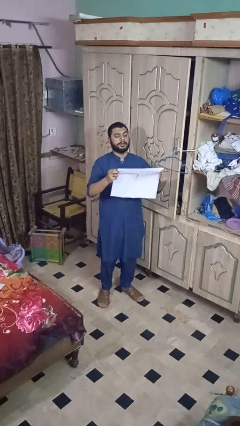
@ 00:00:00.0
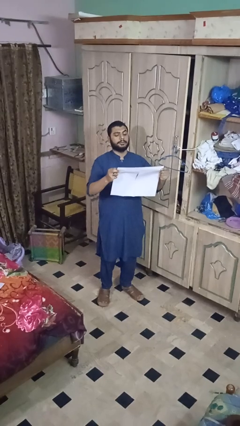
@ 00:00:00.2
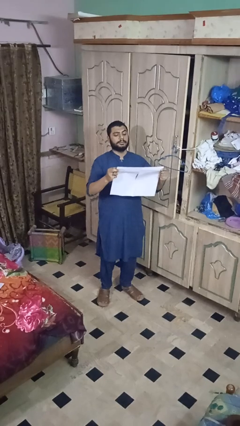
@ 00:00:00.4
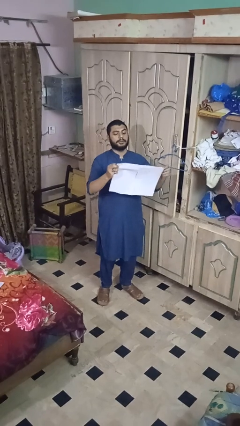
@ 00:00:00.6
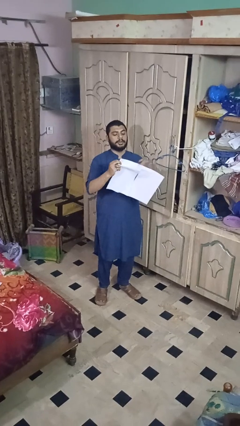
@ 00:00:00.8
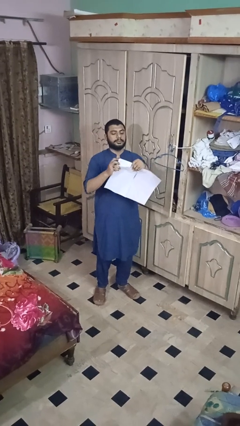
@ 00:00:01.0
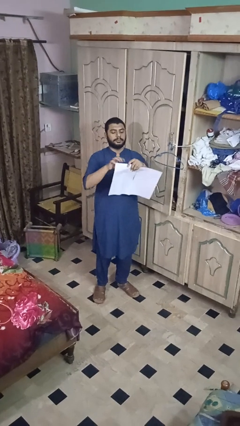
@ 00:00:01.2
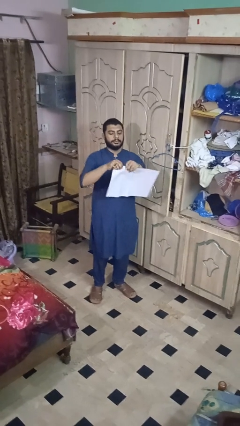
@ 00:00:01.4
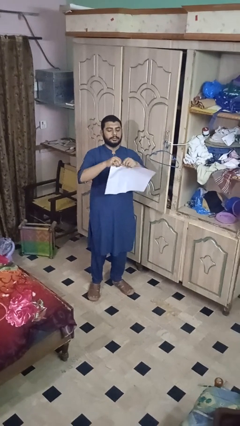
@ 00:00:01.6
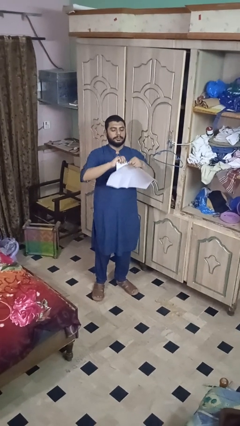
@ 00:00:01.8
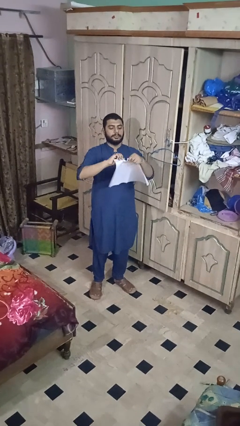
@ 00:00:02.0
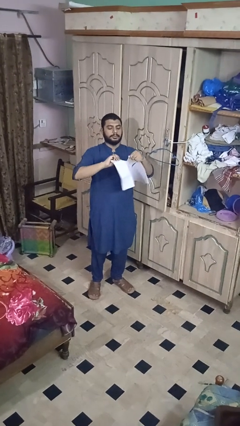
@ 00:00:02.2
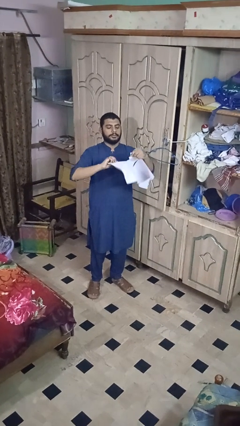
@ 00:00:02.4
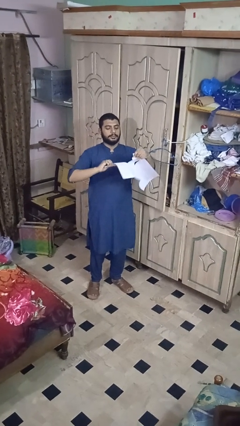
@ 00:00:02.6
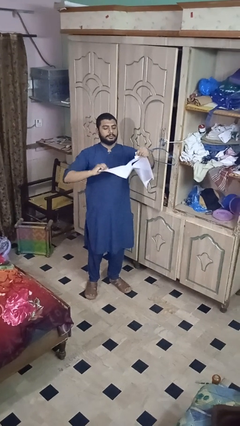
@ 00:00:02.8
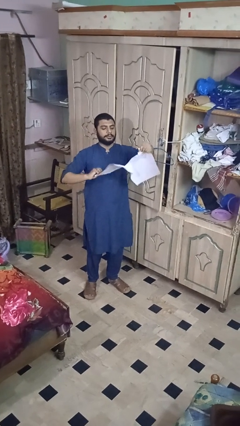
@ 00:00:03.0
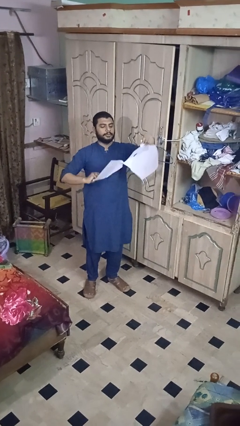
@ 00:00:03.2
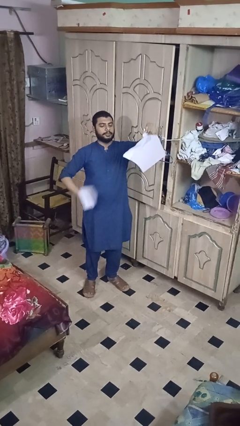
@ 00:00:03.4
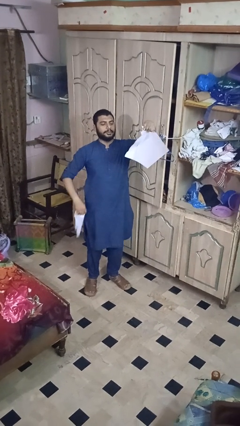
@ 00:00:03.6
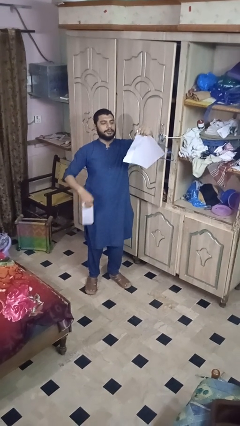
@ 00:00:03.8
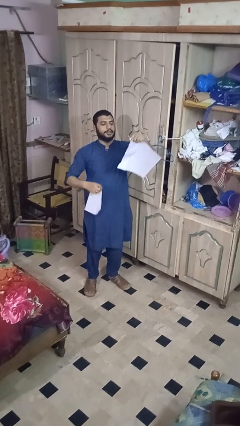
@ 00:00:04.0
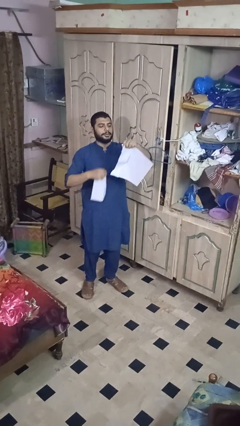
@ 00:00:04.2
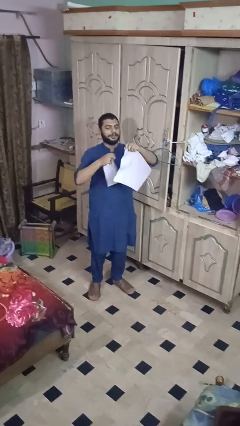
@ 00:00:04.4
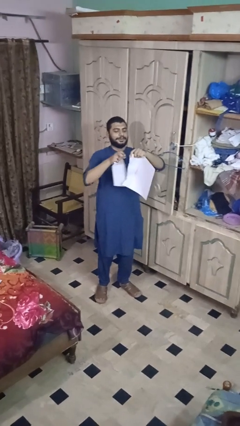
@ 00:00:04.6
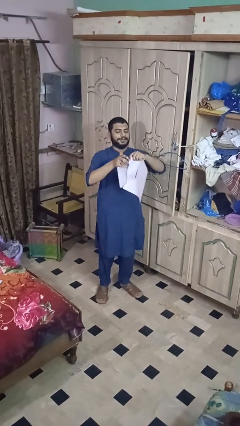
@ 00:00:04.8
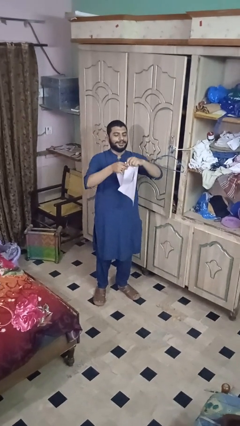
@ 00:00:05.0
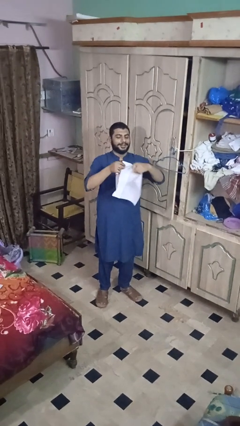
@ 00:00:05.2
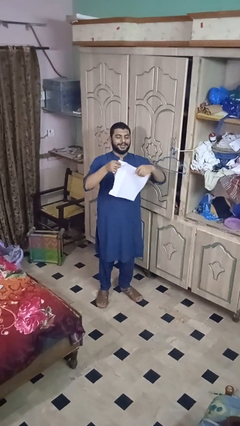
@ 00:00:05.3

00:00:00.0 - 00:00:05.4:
person tears paper

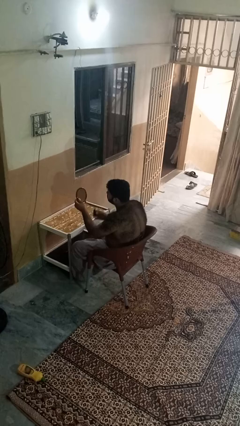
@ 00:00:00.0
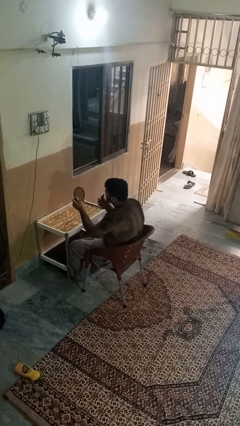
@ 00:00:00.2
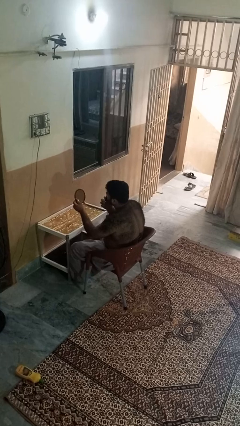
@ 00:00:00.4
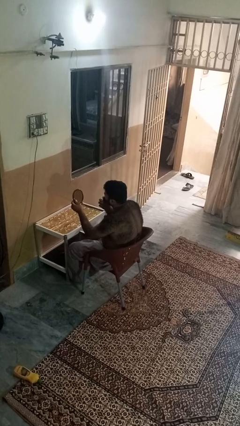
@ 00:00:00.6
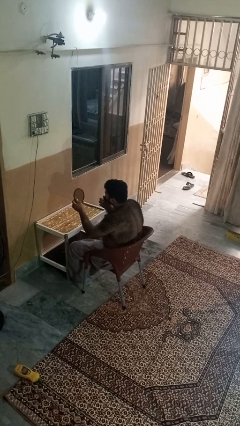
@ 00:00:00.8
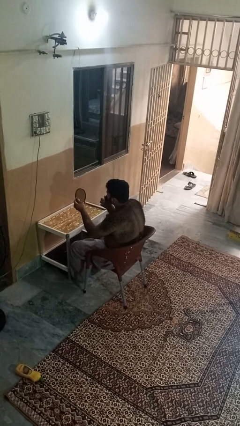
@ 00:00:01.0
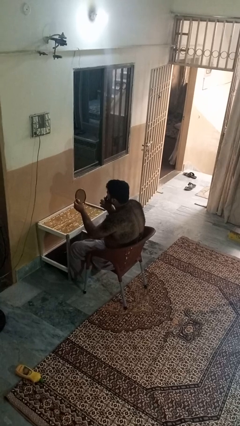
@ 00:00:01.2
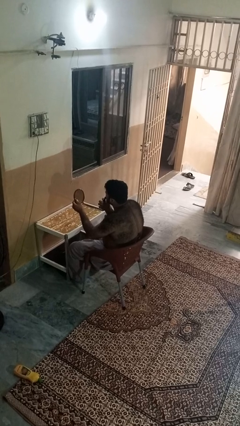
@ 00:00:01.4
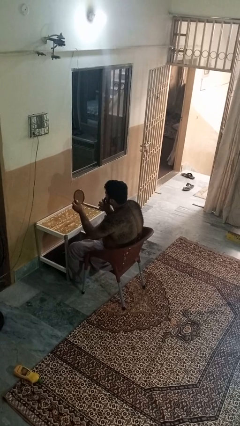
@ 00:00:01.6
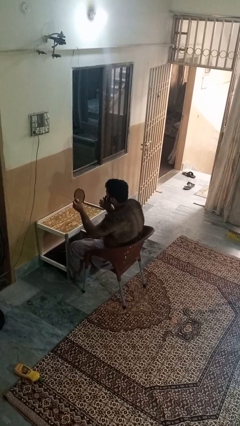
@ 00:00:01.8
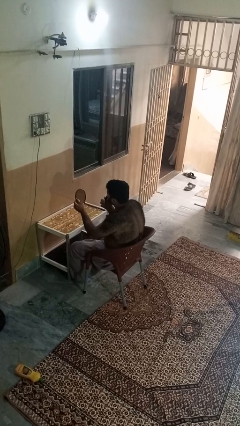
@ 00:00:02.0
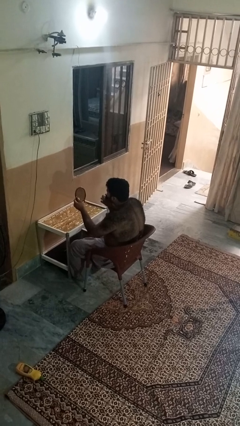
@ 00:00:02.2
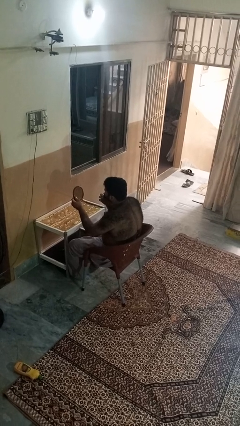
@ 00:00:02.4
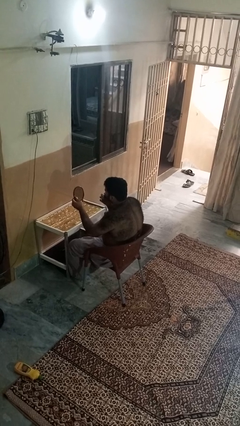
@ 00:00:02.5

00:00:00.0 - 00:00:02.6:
person applies lip makeup

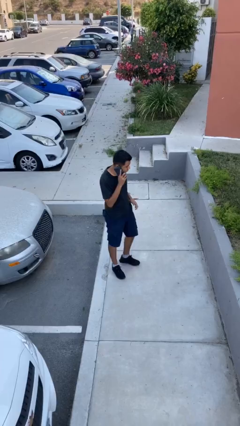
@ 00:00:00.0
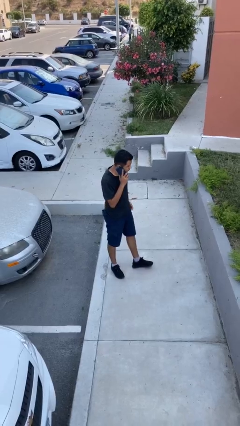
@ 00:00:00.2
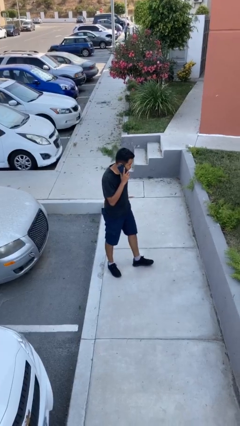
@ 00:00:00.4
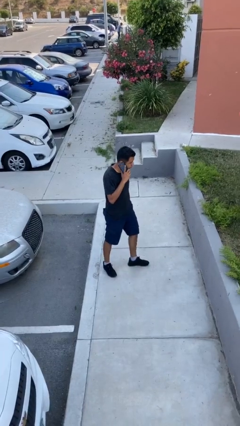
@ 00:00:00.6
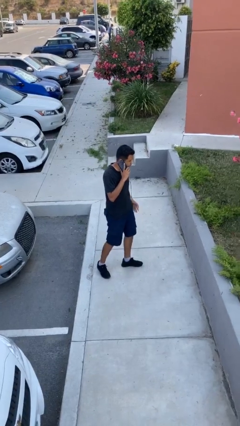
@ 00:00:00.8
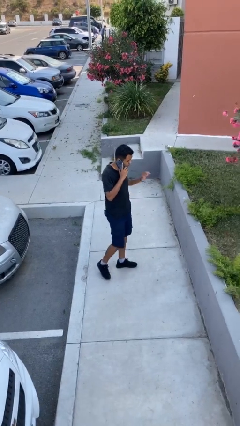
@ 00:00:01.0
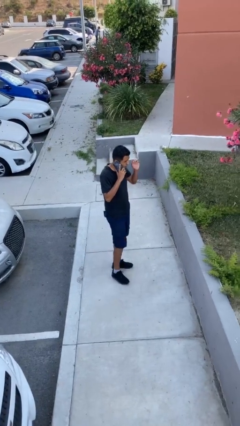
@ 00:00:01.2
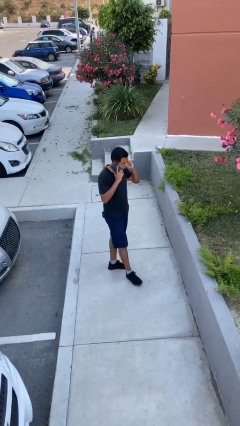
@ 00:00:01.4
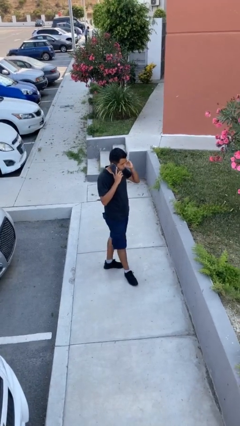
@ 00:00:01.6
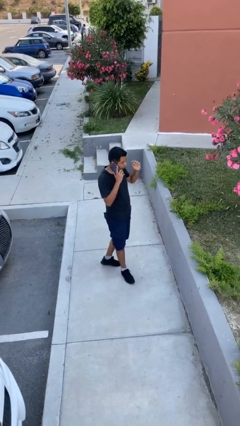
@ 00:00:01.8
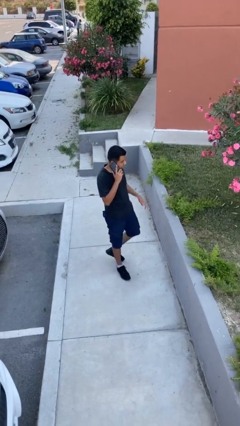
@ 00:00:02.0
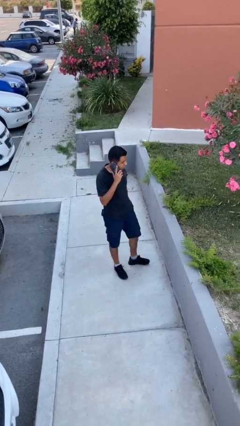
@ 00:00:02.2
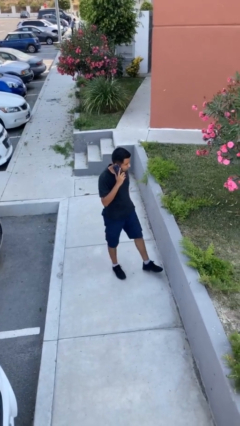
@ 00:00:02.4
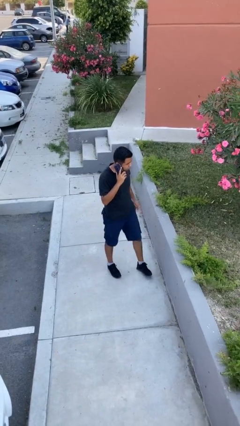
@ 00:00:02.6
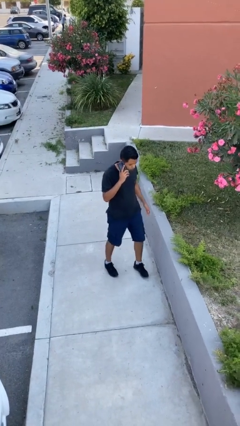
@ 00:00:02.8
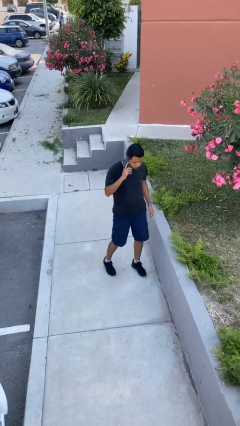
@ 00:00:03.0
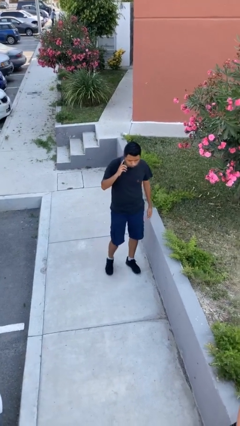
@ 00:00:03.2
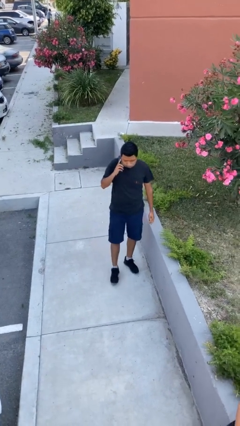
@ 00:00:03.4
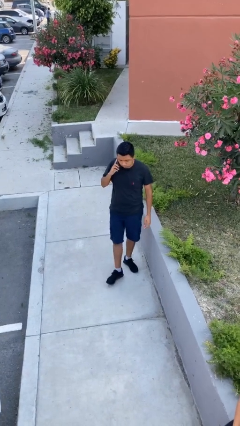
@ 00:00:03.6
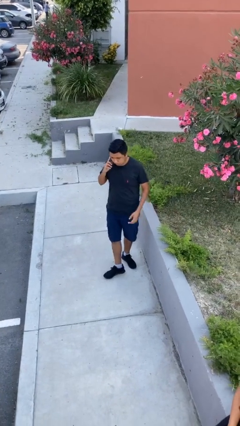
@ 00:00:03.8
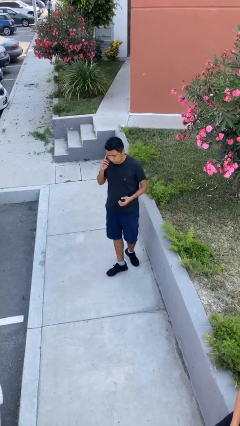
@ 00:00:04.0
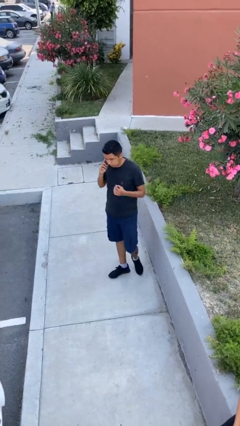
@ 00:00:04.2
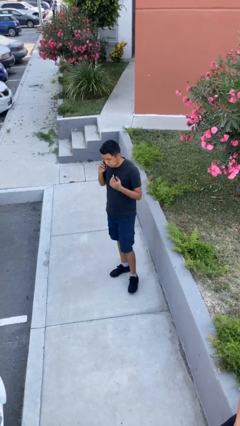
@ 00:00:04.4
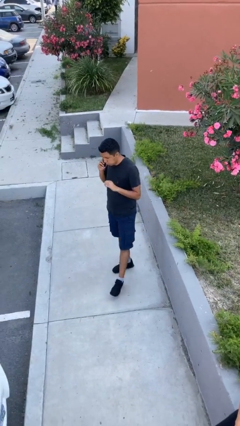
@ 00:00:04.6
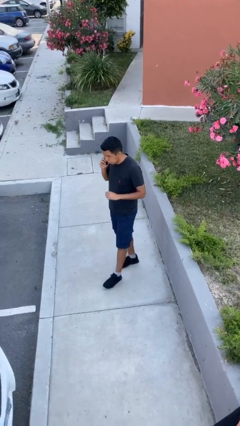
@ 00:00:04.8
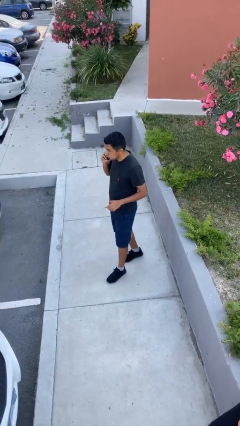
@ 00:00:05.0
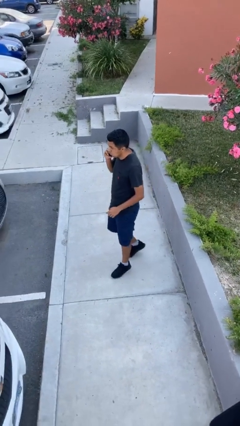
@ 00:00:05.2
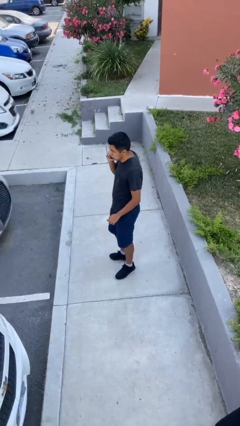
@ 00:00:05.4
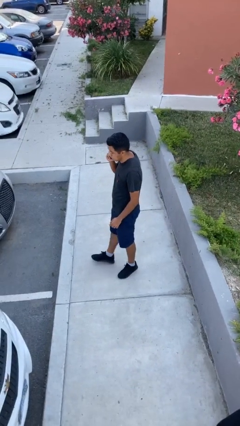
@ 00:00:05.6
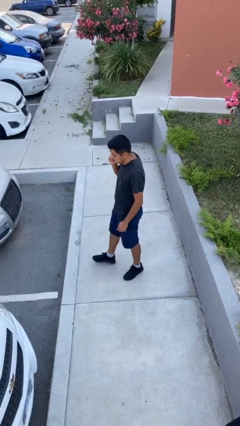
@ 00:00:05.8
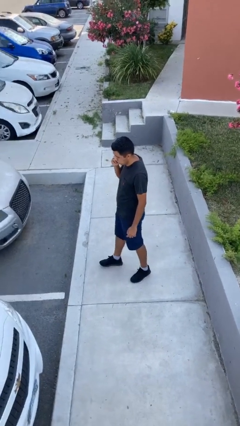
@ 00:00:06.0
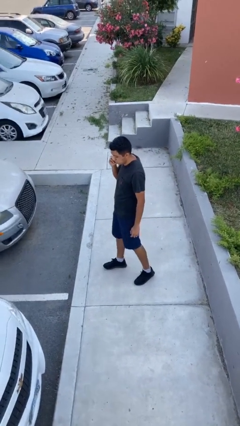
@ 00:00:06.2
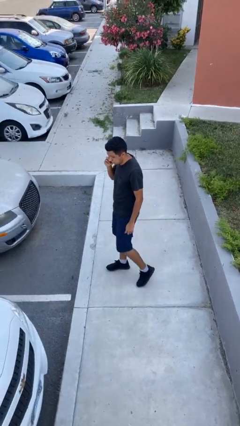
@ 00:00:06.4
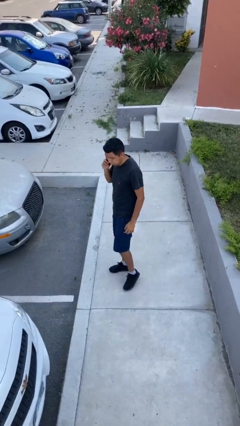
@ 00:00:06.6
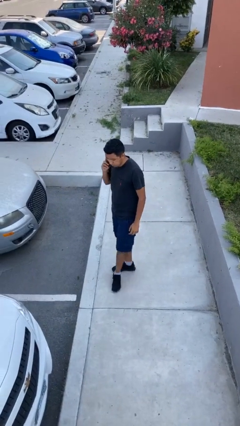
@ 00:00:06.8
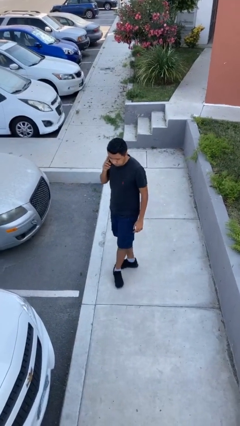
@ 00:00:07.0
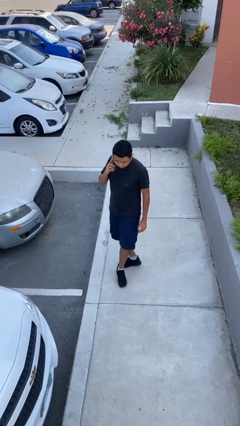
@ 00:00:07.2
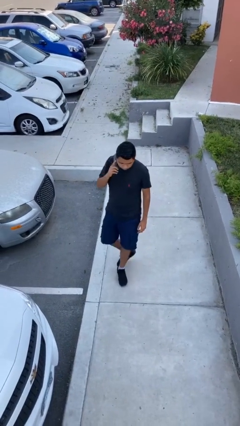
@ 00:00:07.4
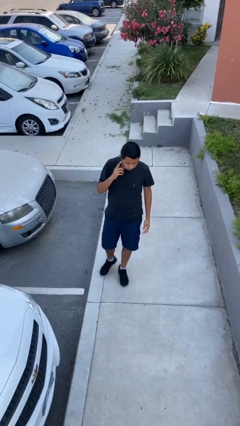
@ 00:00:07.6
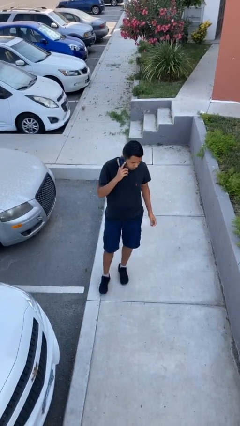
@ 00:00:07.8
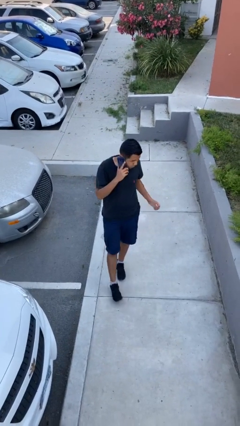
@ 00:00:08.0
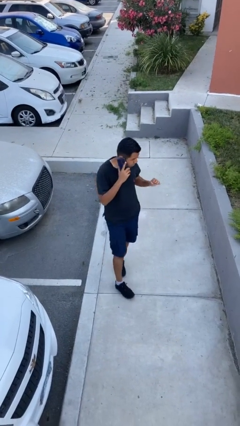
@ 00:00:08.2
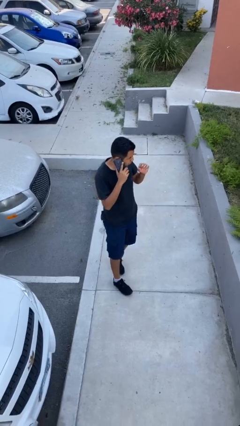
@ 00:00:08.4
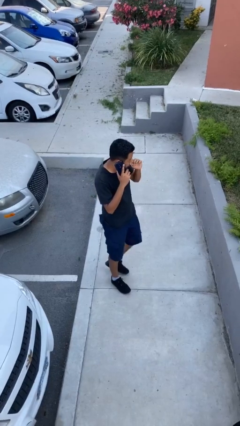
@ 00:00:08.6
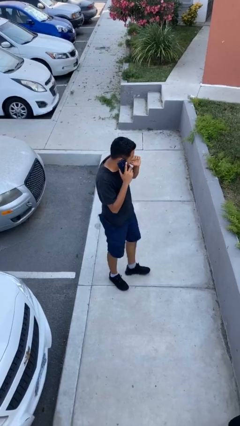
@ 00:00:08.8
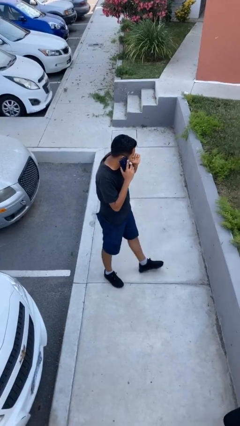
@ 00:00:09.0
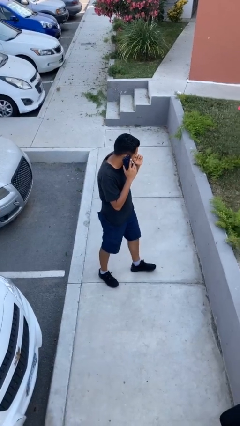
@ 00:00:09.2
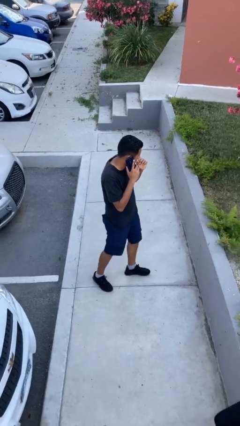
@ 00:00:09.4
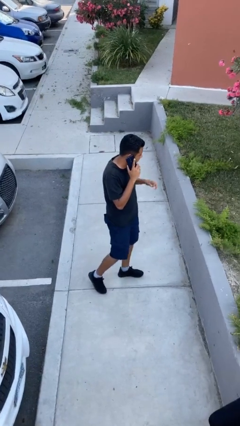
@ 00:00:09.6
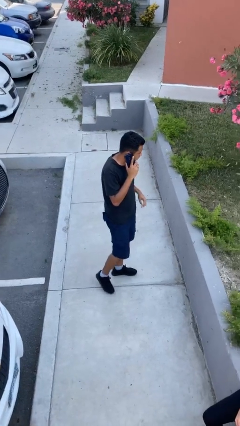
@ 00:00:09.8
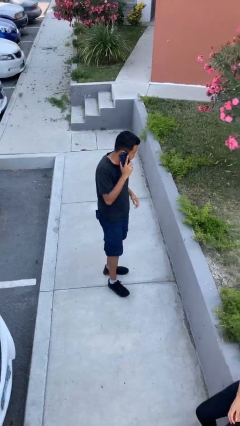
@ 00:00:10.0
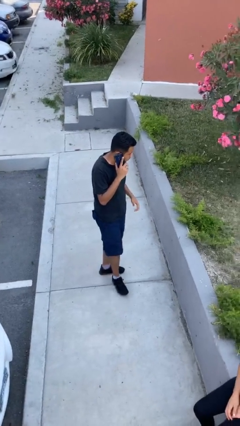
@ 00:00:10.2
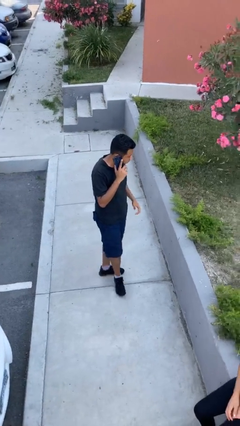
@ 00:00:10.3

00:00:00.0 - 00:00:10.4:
person talks on phone
